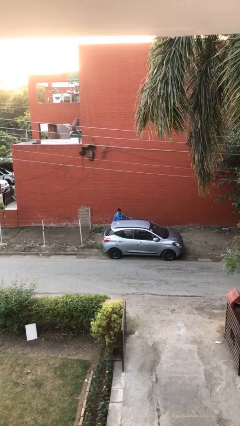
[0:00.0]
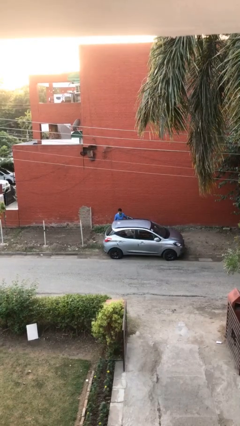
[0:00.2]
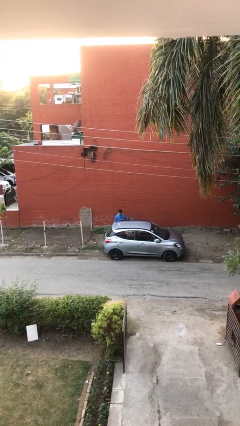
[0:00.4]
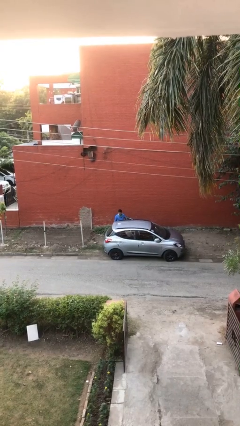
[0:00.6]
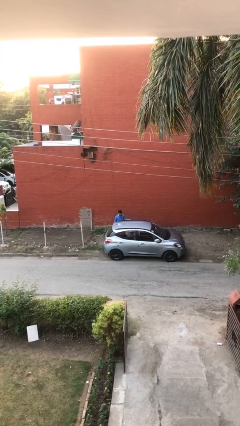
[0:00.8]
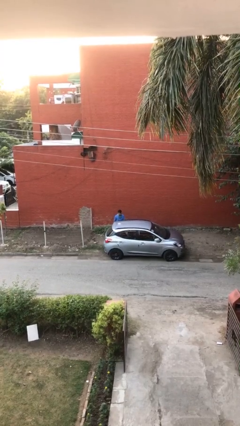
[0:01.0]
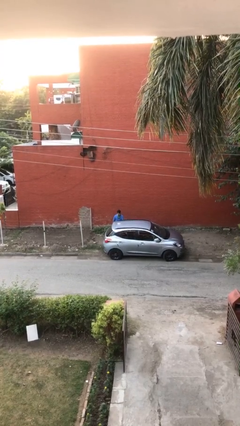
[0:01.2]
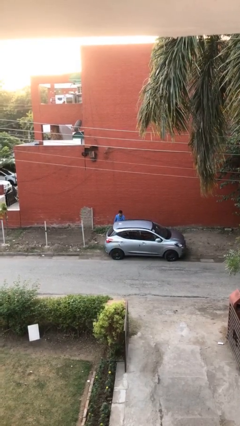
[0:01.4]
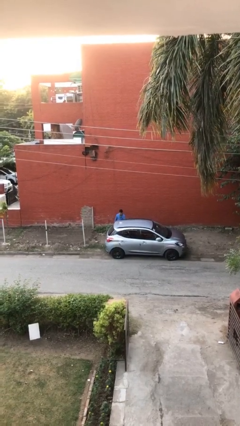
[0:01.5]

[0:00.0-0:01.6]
person closes car door

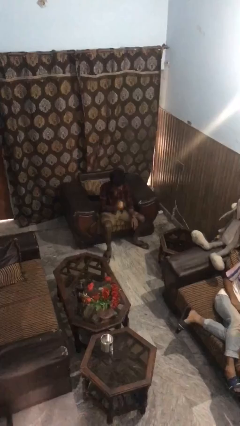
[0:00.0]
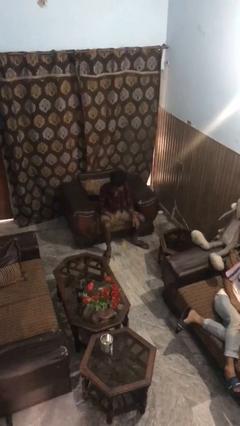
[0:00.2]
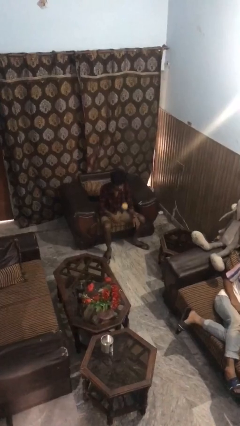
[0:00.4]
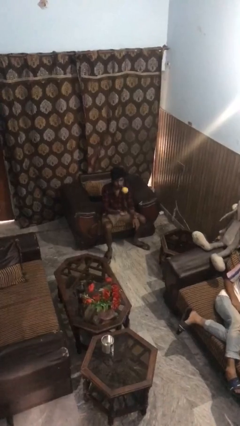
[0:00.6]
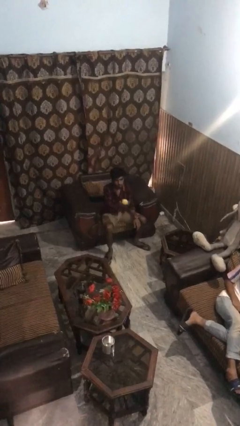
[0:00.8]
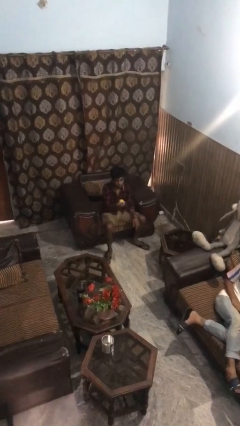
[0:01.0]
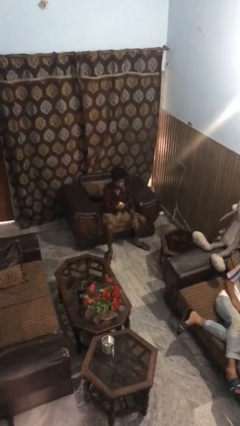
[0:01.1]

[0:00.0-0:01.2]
person bounces ball on floor

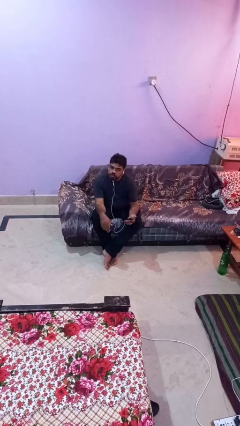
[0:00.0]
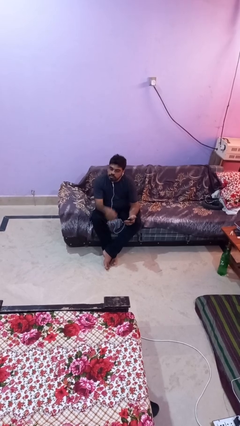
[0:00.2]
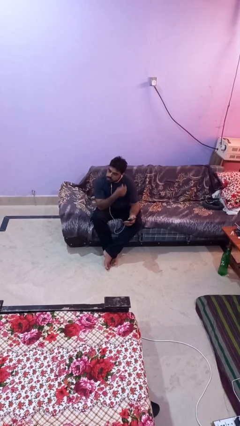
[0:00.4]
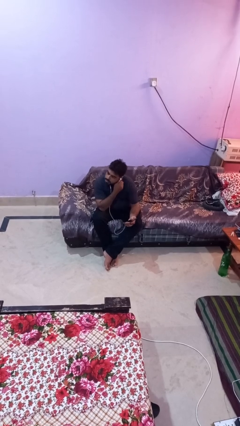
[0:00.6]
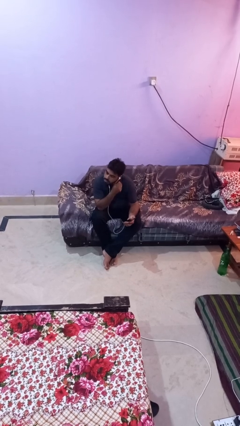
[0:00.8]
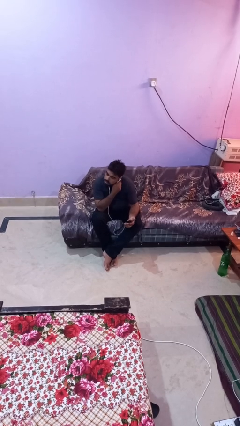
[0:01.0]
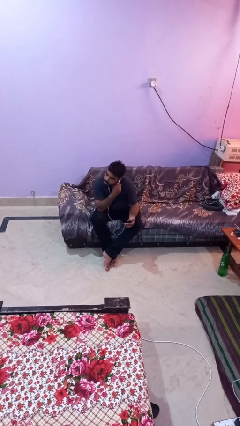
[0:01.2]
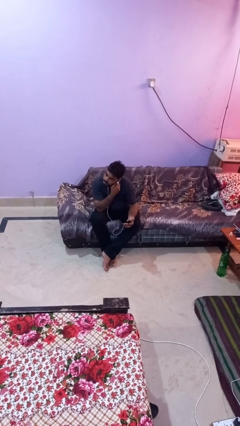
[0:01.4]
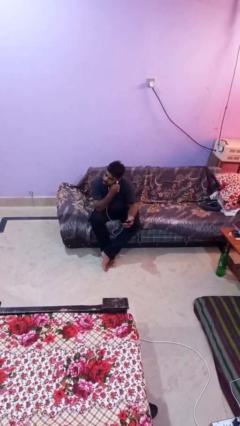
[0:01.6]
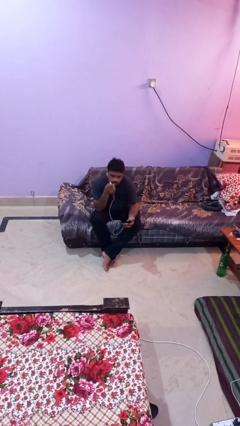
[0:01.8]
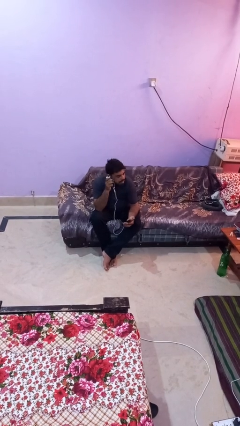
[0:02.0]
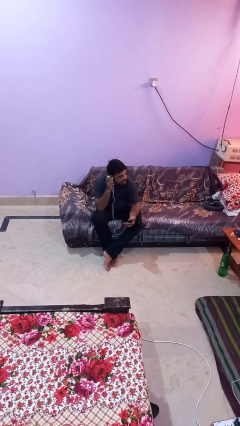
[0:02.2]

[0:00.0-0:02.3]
person takes off headphones

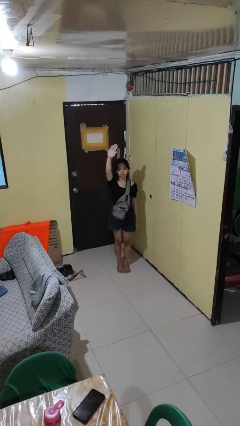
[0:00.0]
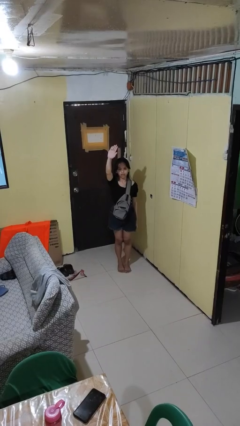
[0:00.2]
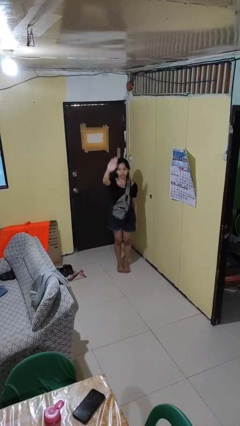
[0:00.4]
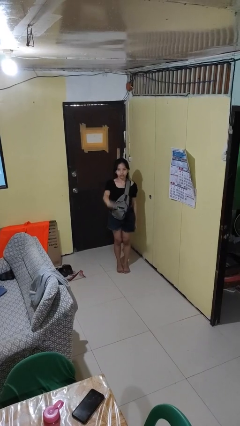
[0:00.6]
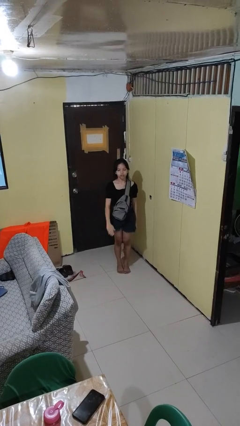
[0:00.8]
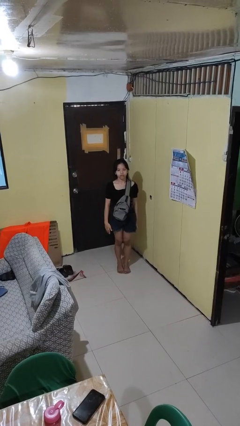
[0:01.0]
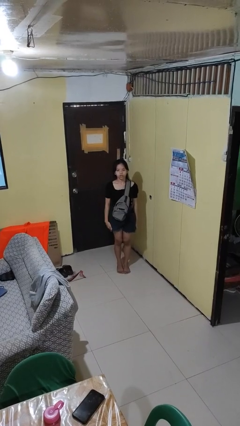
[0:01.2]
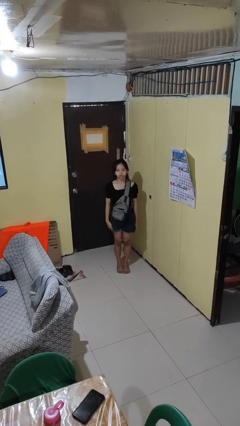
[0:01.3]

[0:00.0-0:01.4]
person gestures swipe down

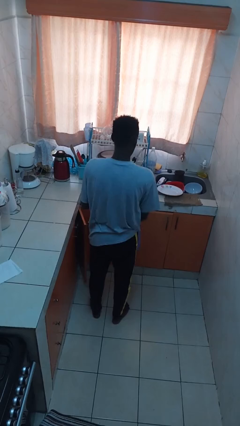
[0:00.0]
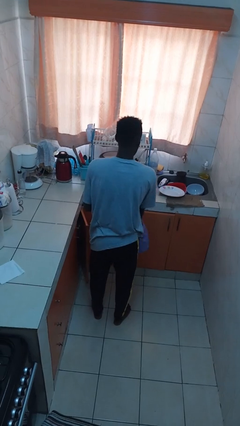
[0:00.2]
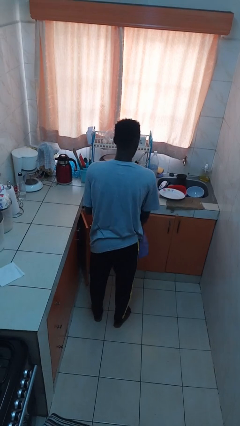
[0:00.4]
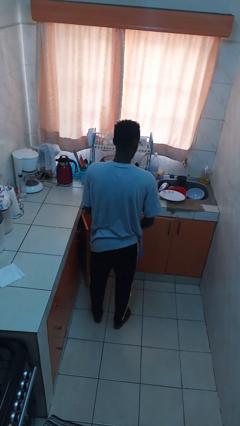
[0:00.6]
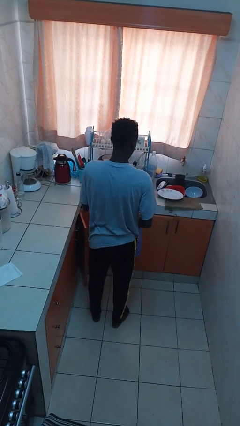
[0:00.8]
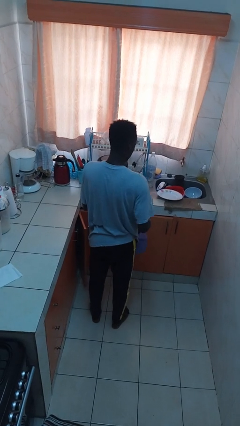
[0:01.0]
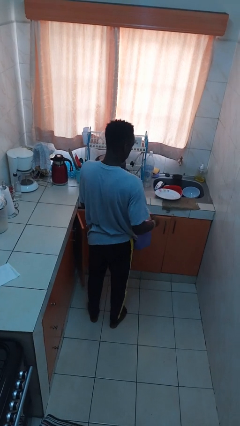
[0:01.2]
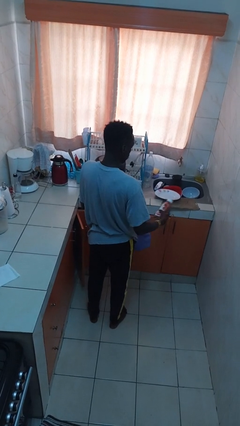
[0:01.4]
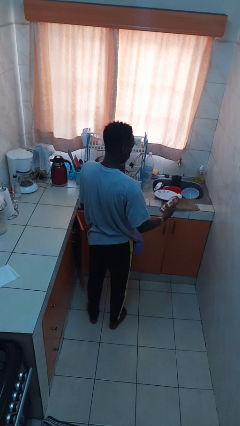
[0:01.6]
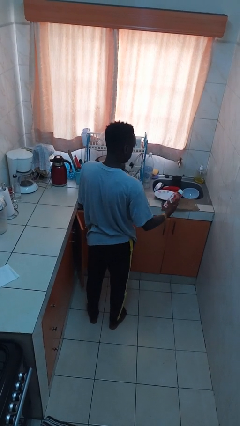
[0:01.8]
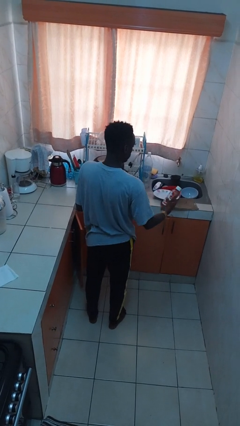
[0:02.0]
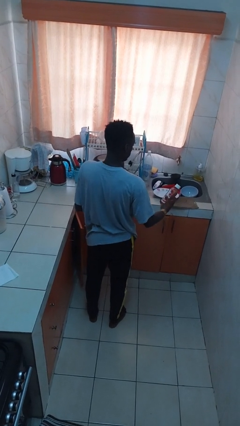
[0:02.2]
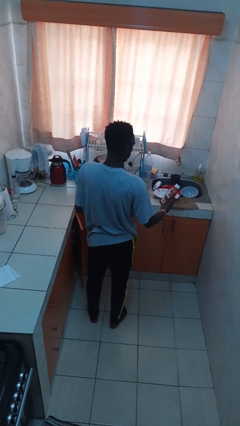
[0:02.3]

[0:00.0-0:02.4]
person takes object from bag

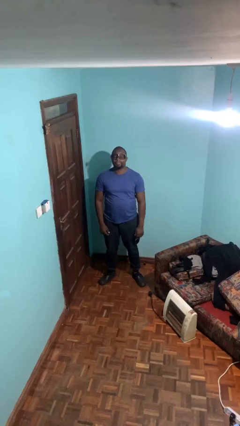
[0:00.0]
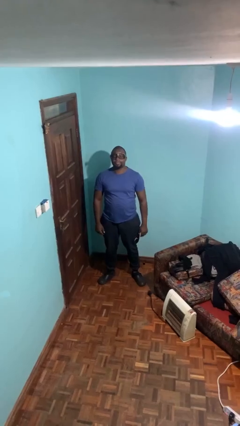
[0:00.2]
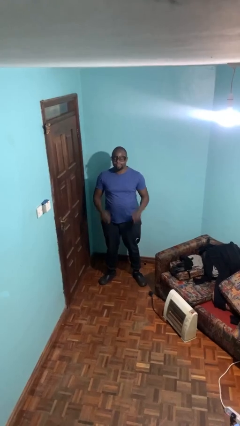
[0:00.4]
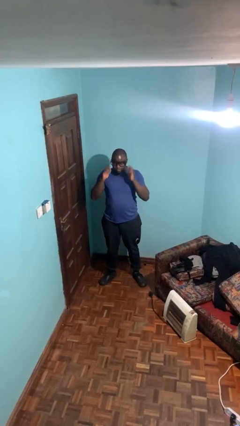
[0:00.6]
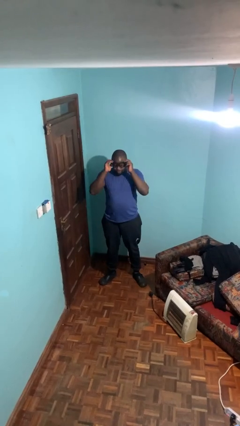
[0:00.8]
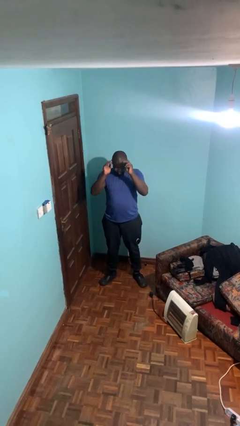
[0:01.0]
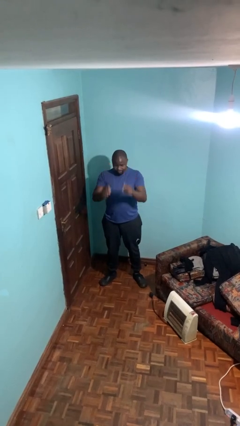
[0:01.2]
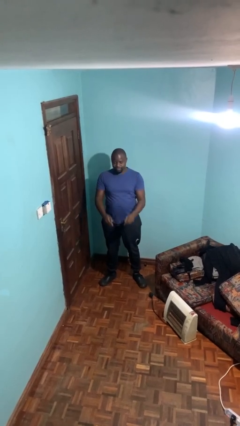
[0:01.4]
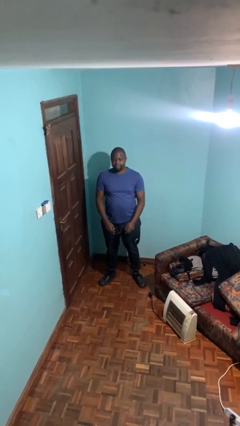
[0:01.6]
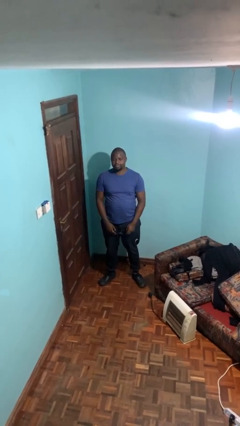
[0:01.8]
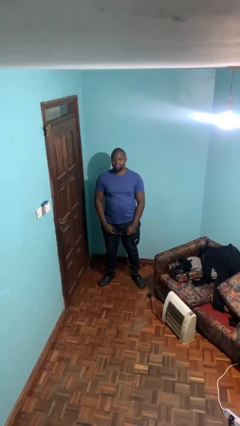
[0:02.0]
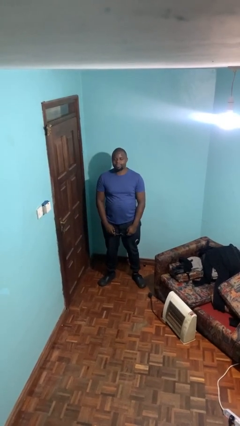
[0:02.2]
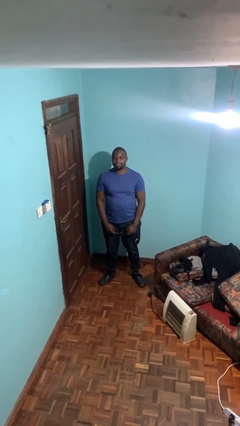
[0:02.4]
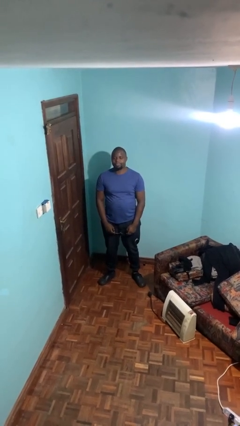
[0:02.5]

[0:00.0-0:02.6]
person takes off glasses

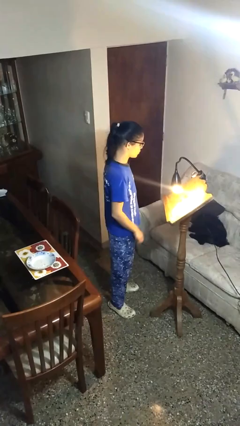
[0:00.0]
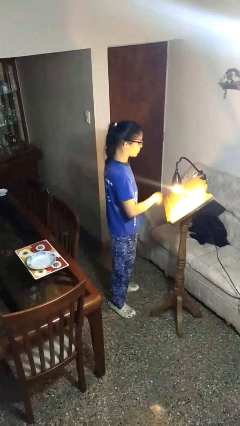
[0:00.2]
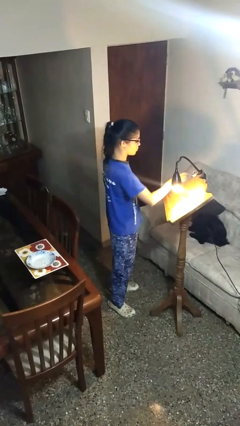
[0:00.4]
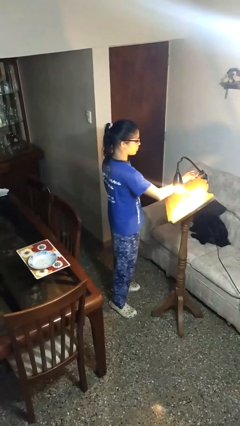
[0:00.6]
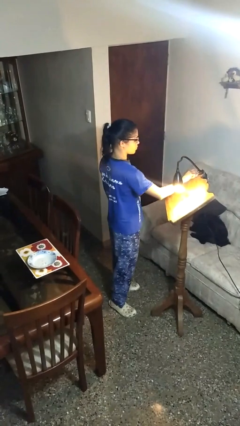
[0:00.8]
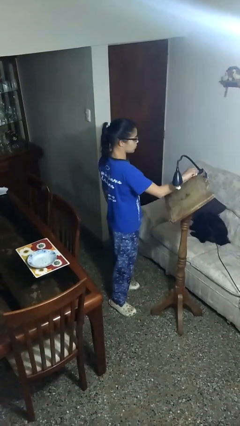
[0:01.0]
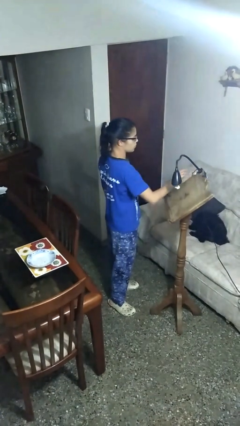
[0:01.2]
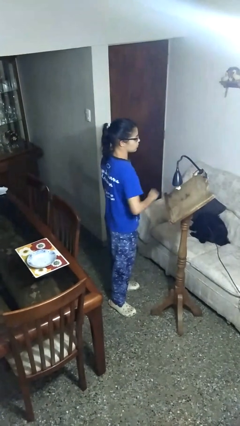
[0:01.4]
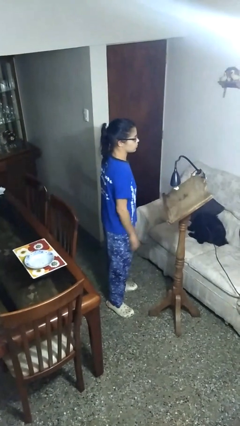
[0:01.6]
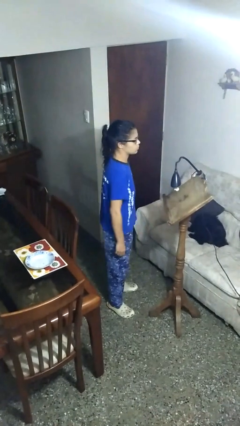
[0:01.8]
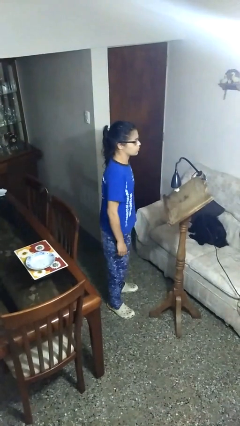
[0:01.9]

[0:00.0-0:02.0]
person turns off lamp

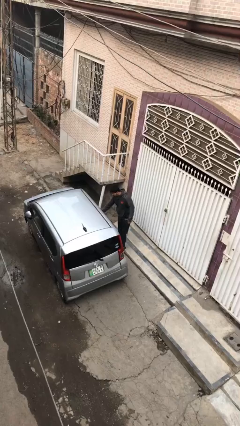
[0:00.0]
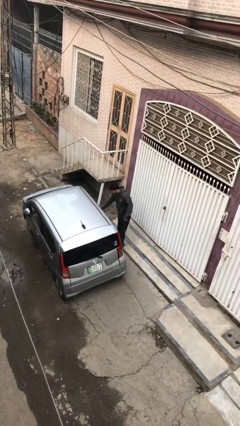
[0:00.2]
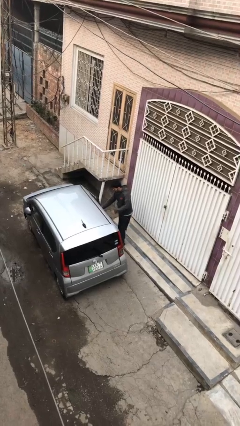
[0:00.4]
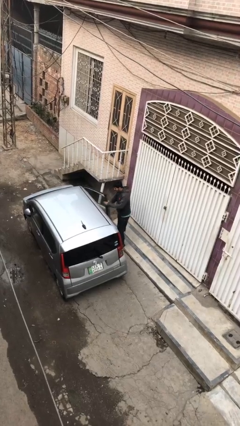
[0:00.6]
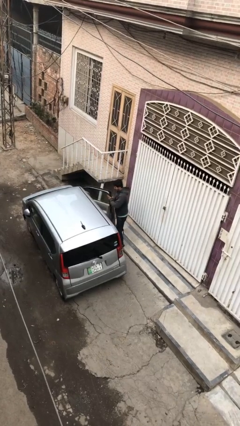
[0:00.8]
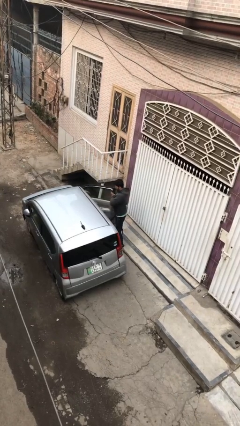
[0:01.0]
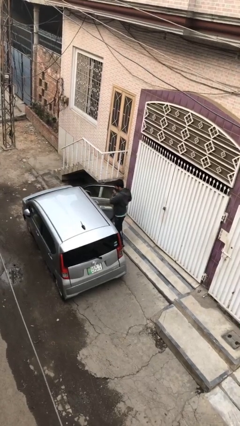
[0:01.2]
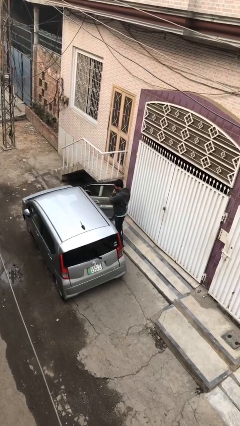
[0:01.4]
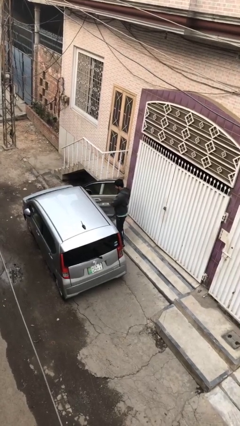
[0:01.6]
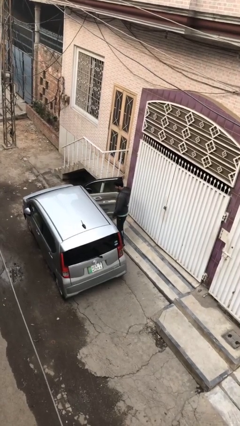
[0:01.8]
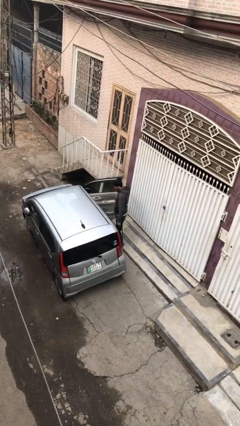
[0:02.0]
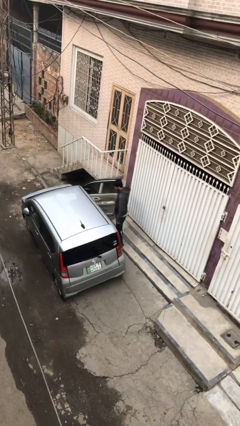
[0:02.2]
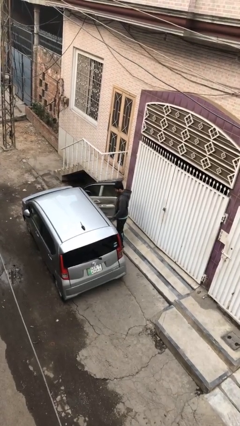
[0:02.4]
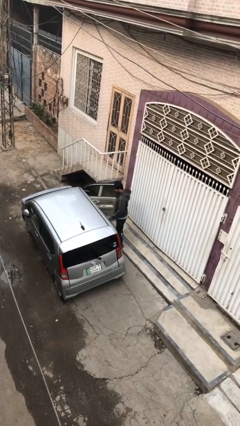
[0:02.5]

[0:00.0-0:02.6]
person opens car door

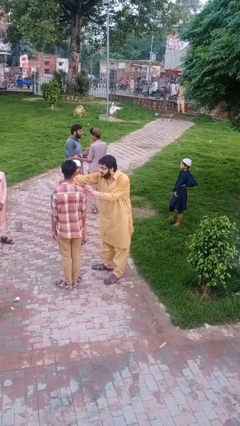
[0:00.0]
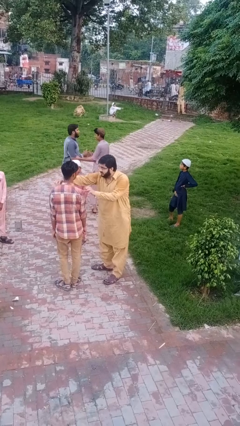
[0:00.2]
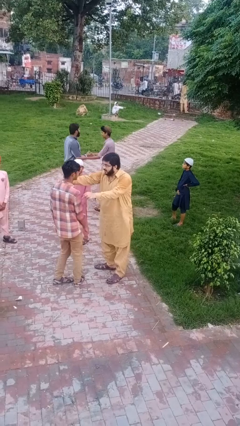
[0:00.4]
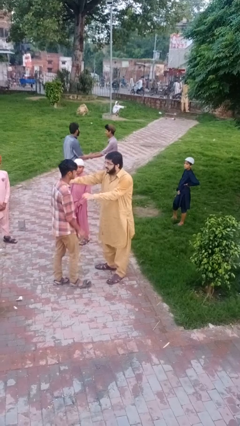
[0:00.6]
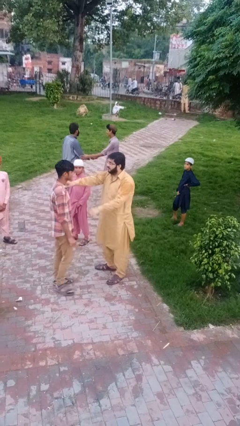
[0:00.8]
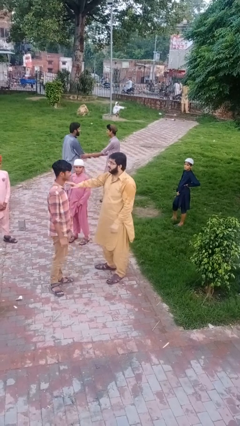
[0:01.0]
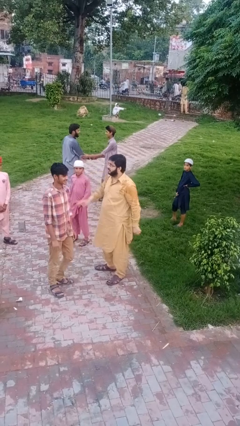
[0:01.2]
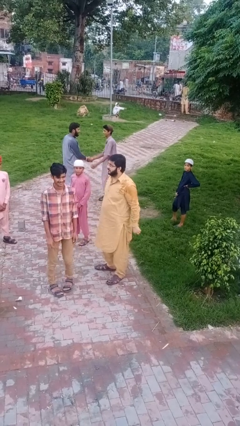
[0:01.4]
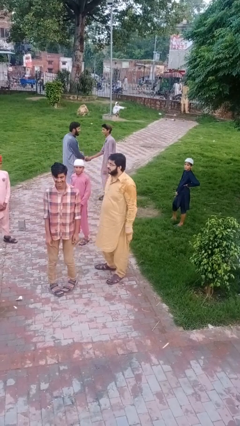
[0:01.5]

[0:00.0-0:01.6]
person spins person around
